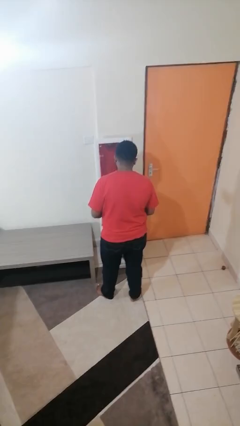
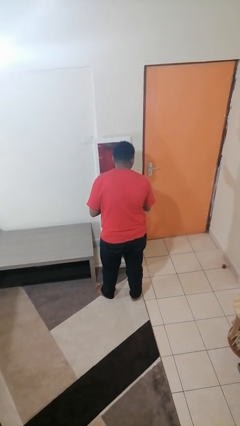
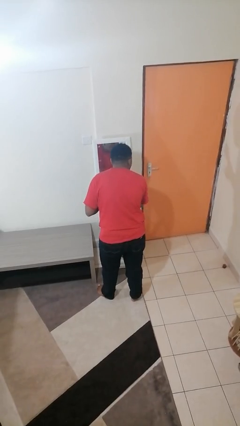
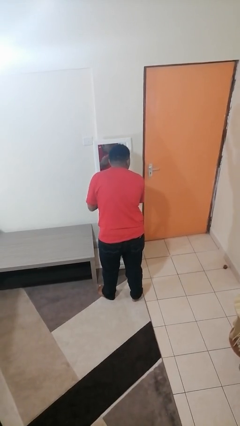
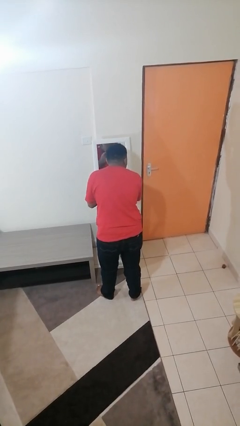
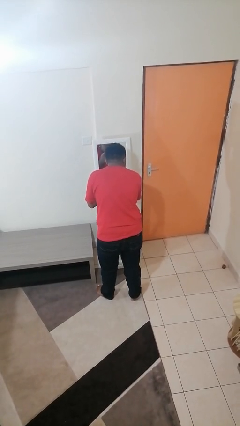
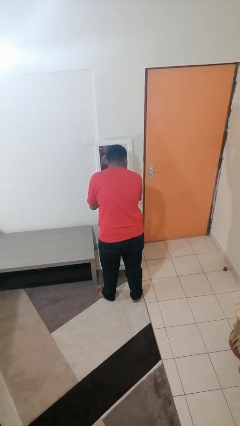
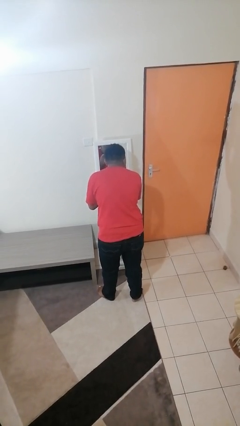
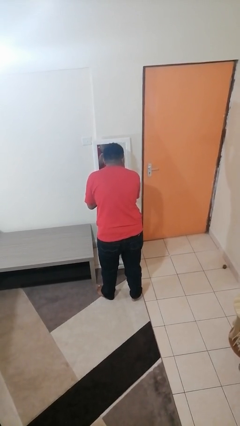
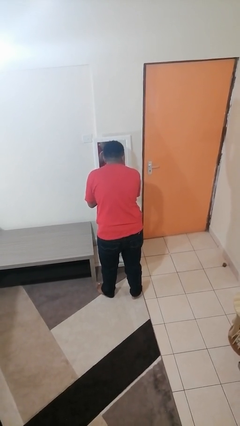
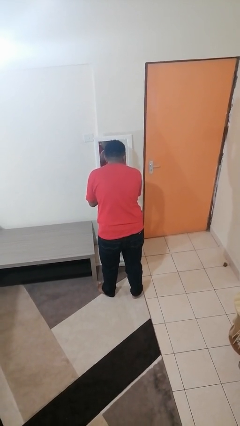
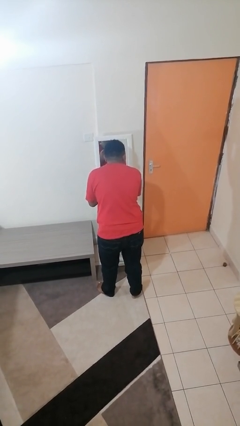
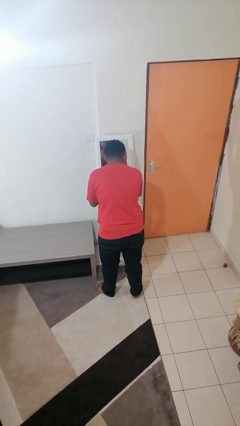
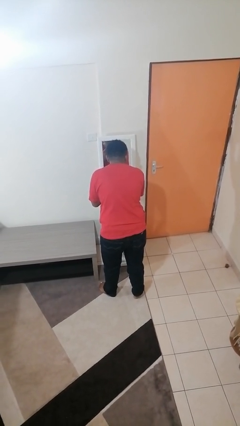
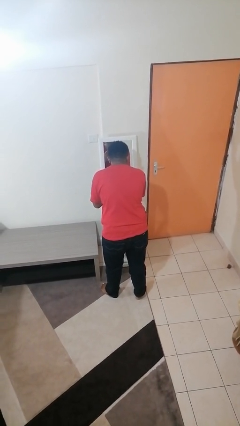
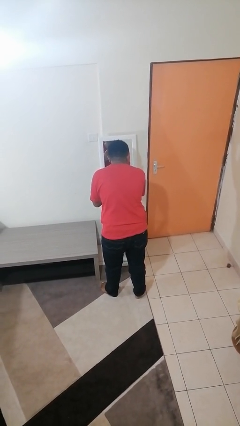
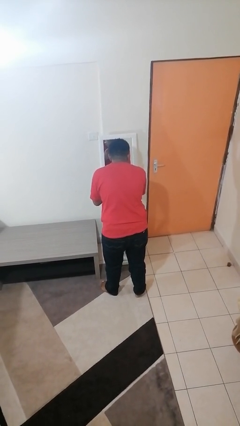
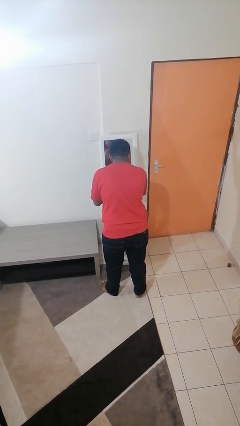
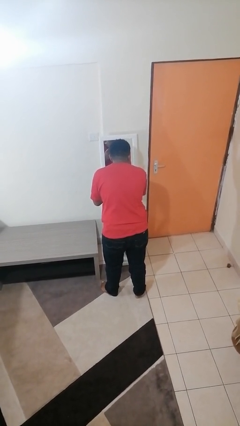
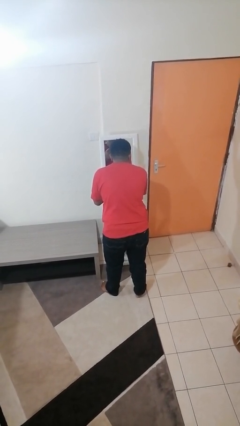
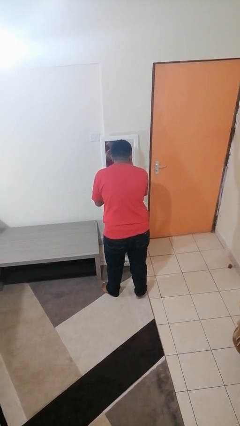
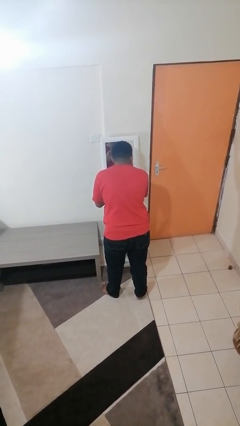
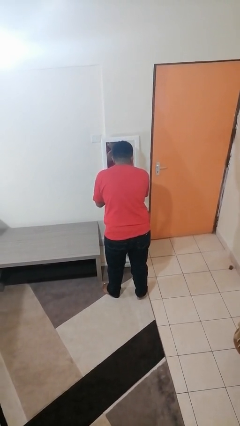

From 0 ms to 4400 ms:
person applies eye makeup

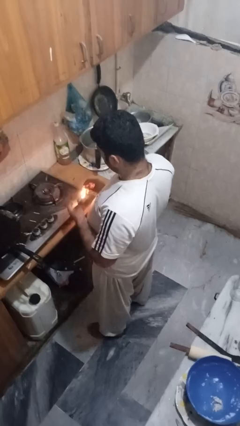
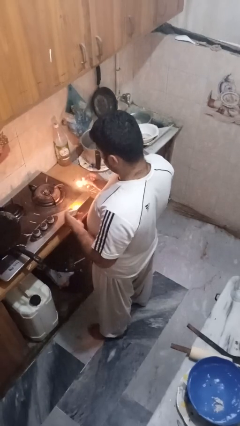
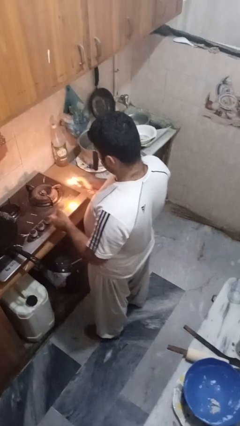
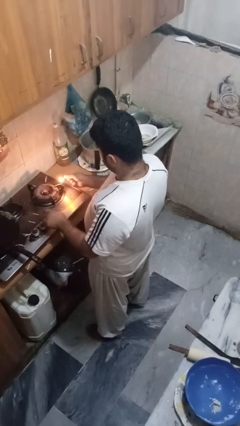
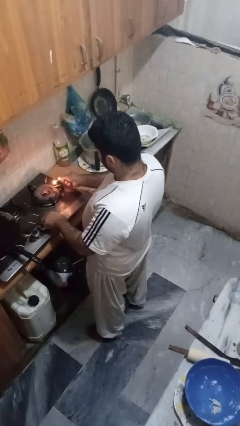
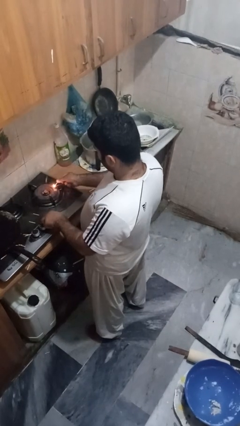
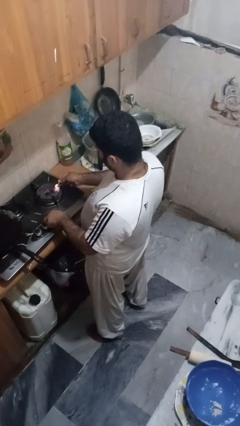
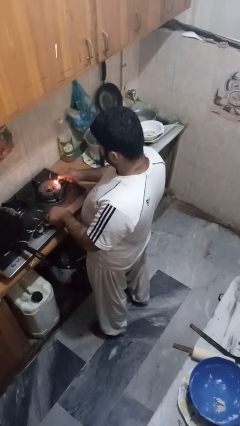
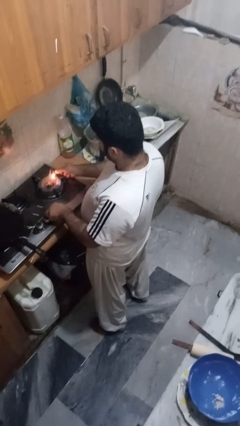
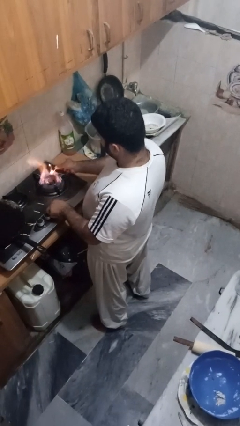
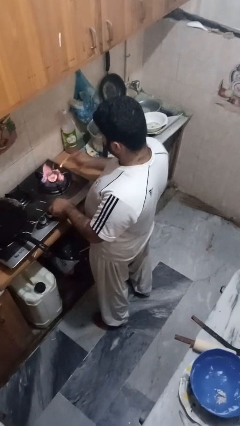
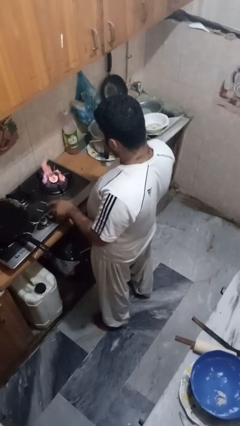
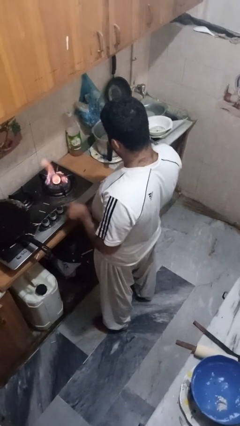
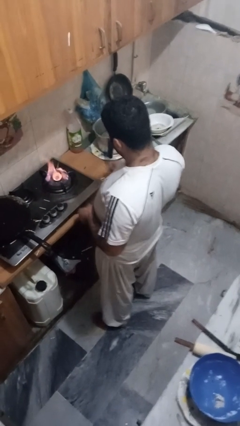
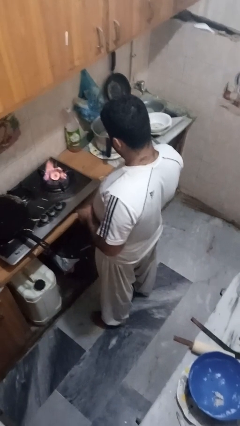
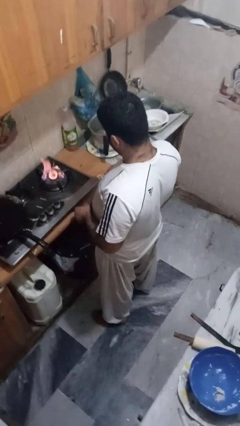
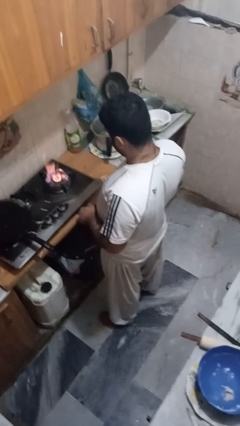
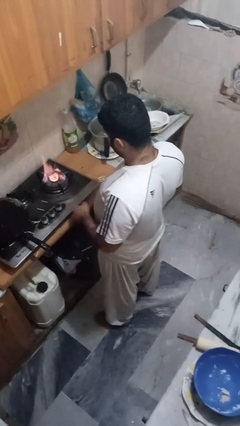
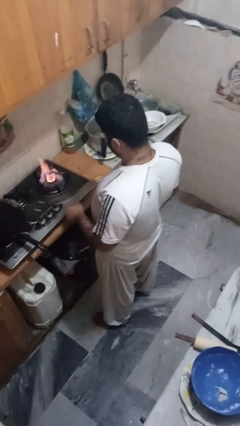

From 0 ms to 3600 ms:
person turns on stovetop

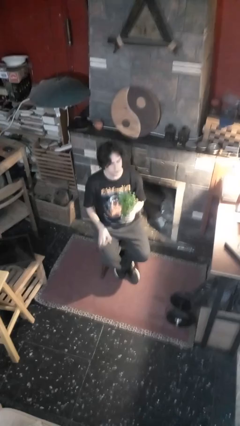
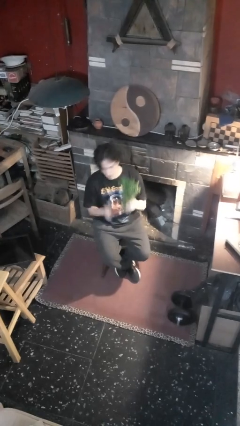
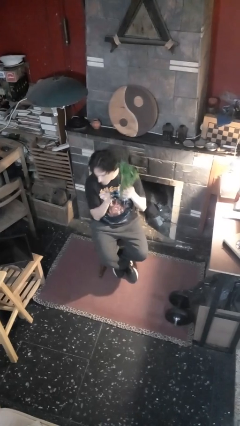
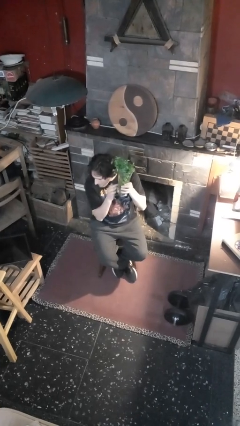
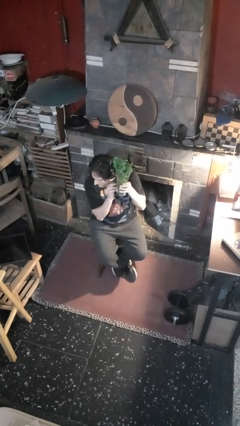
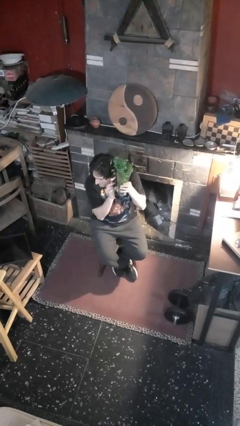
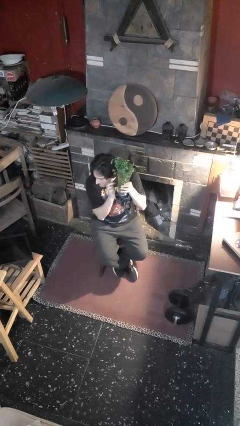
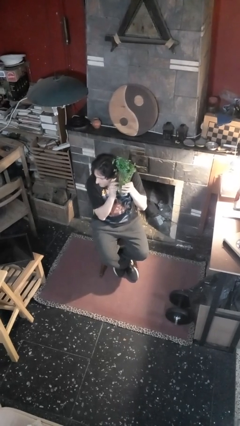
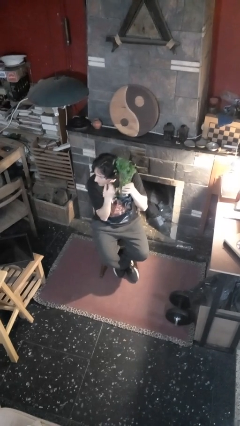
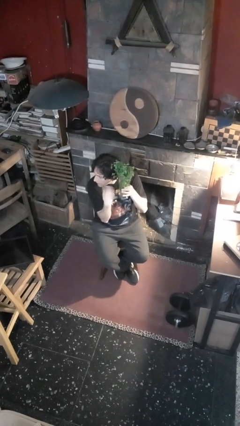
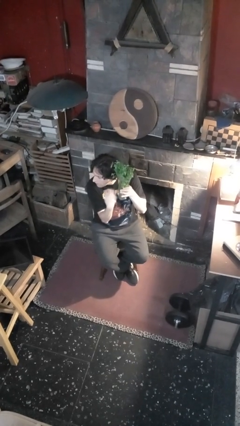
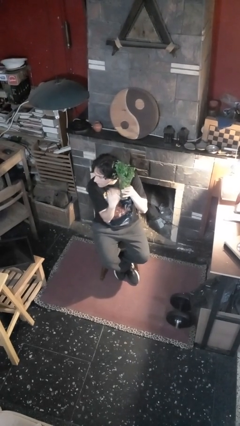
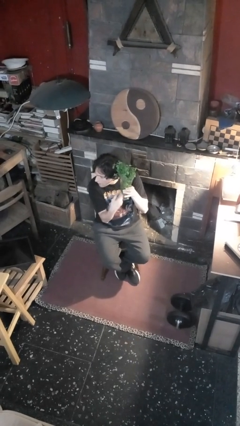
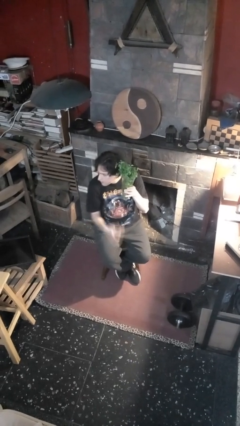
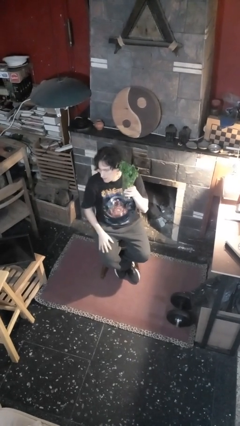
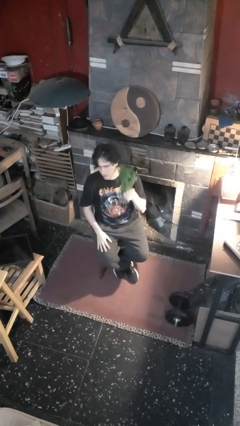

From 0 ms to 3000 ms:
person taps object with finger

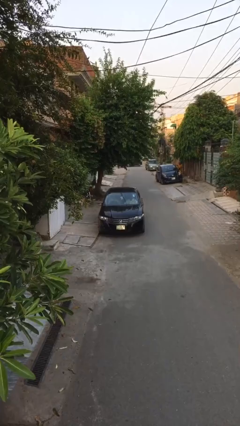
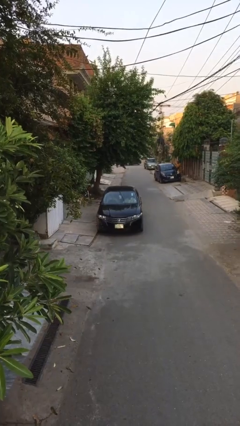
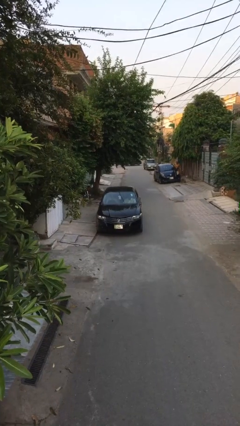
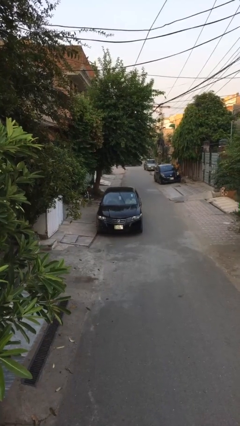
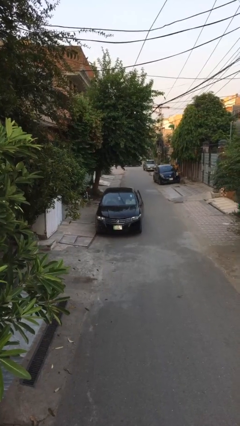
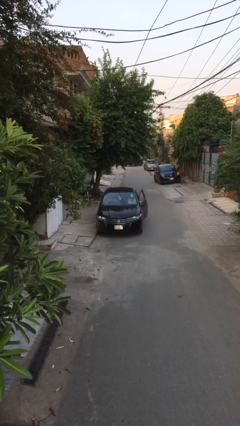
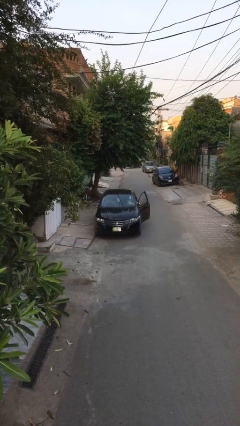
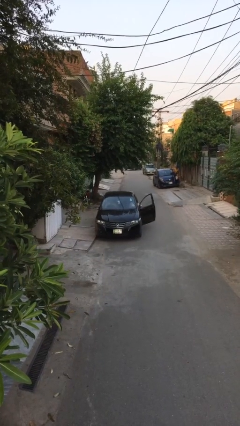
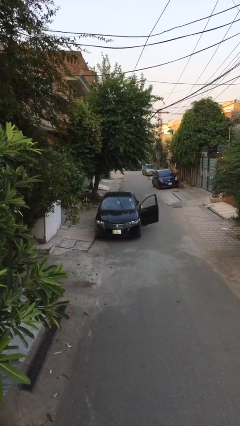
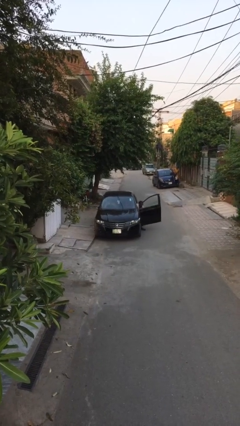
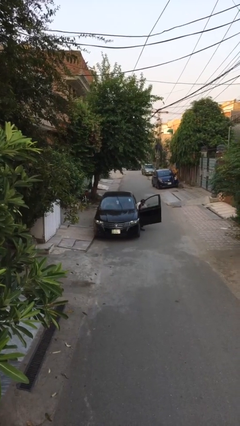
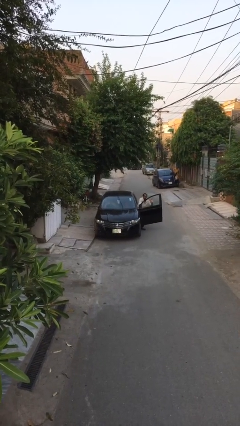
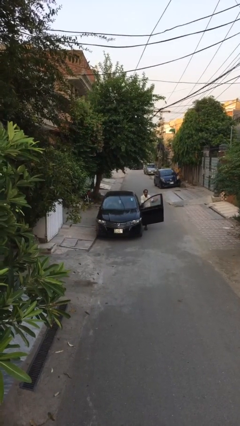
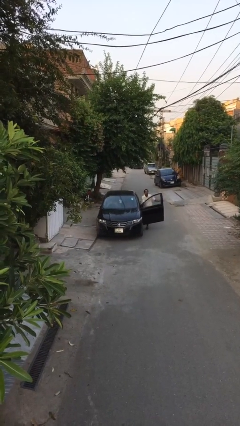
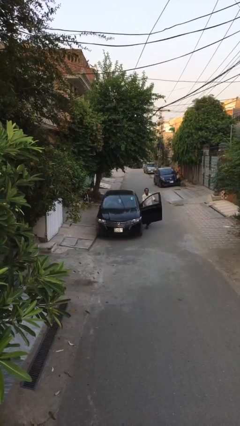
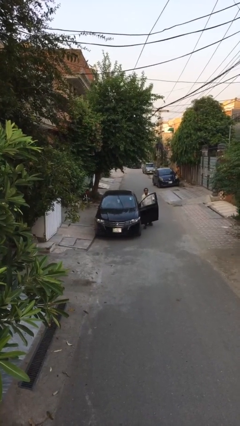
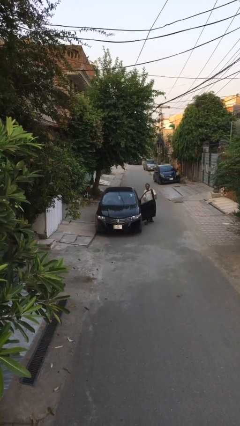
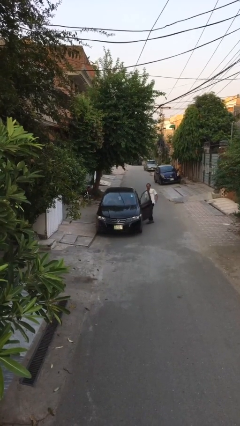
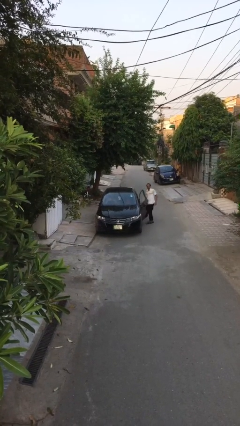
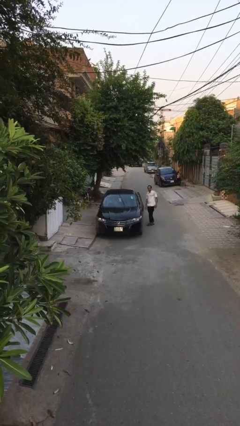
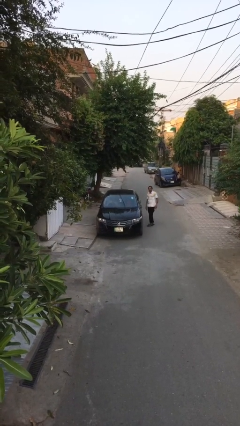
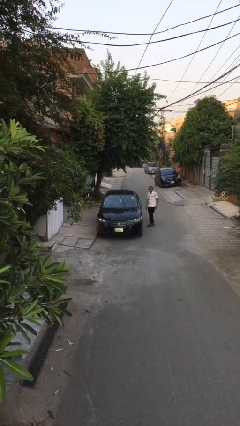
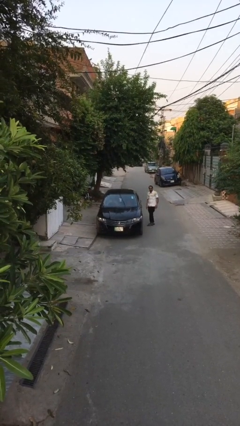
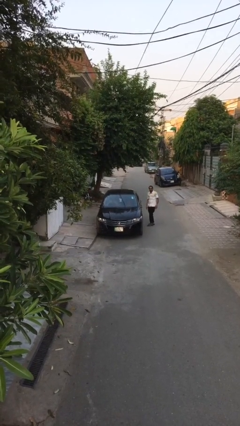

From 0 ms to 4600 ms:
car drops off person

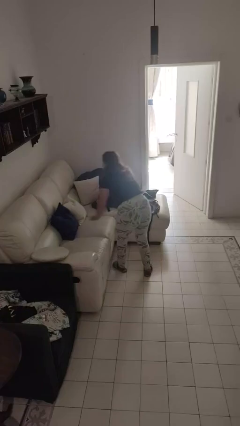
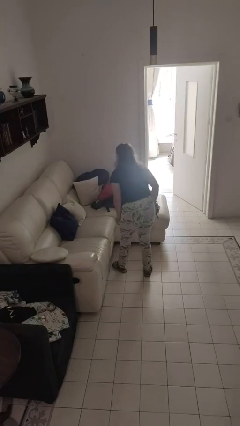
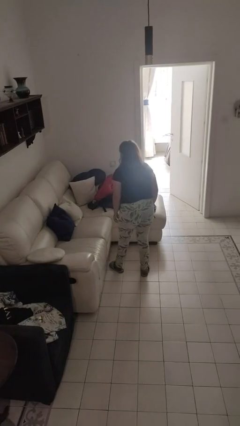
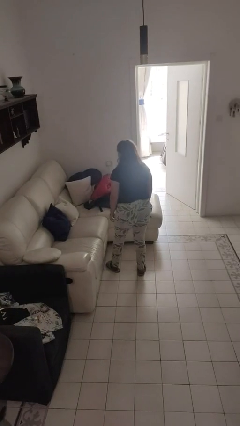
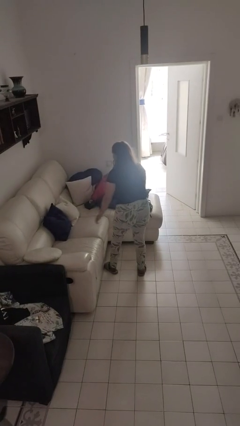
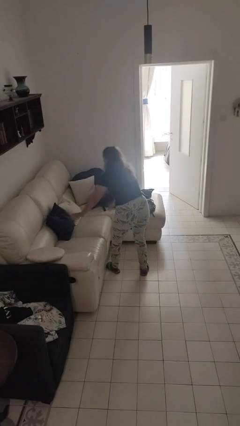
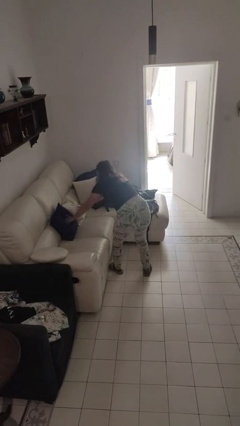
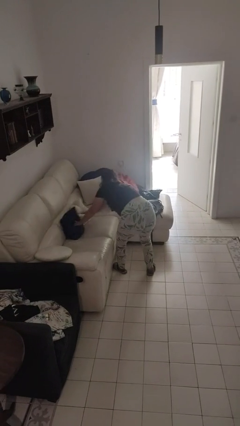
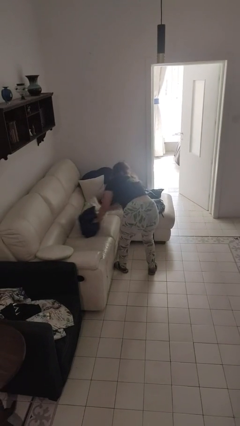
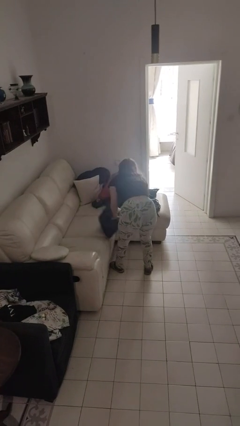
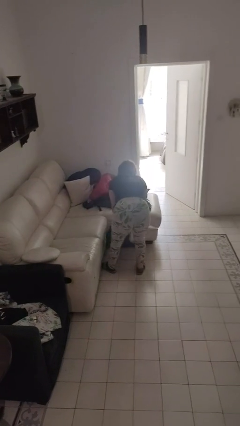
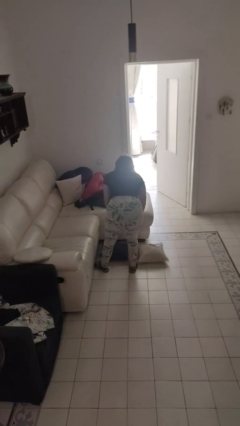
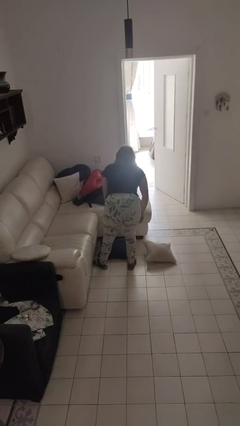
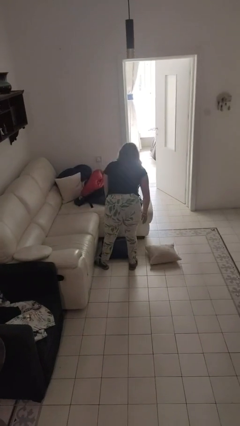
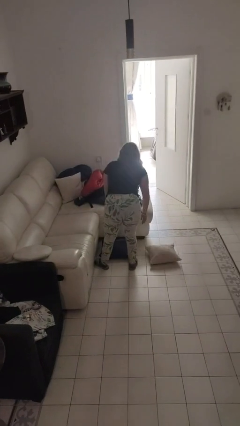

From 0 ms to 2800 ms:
person knocks over furniture
